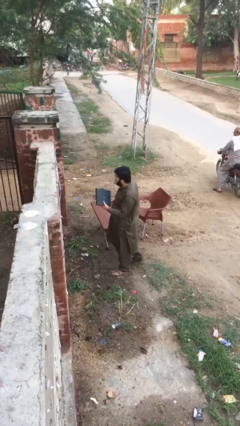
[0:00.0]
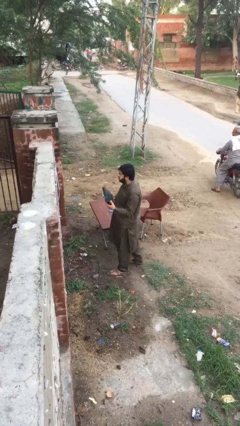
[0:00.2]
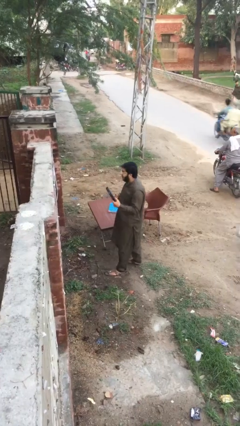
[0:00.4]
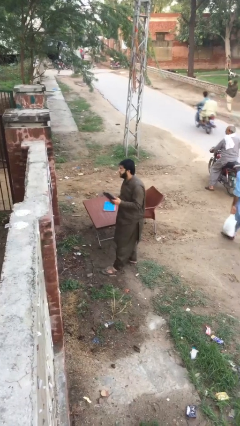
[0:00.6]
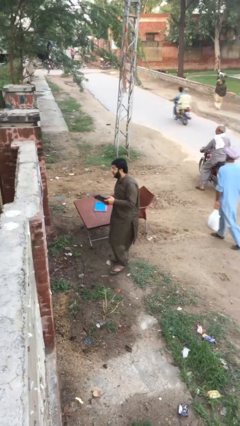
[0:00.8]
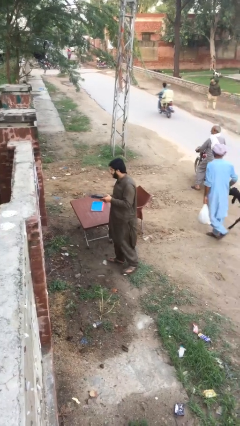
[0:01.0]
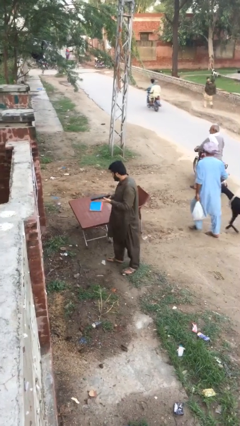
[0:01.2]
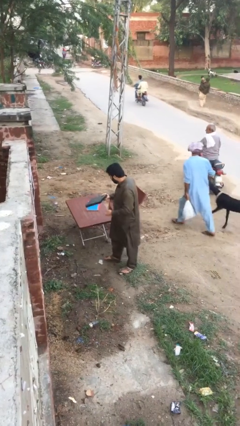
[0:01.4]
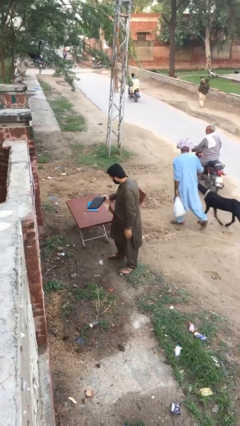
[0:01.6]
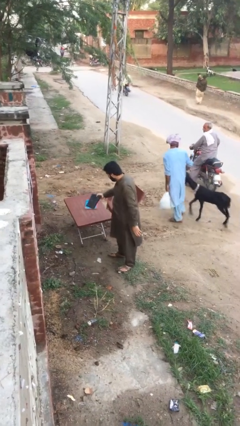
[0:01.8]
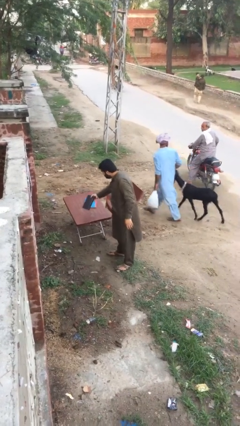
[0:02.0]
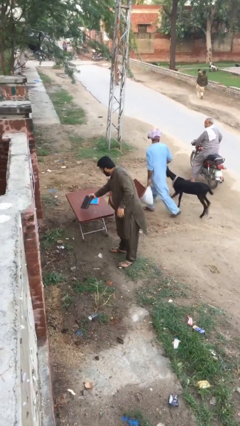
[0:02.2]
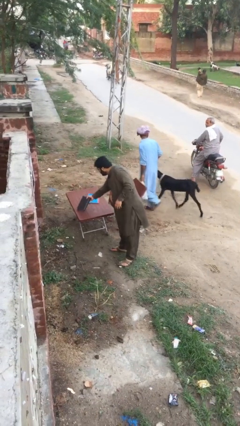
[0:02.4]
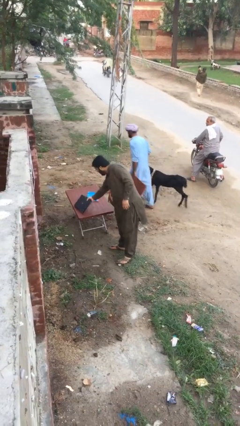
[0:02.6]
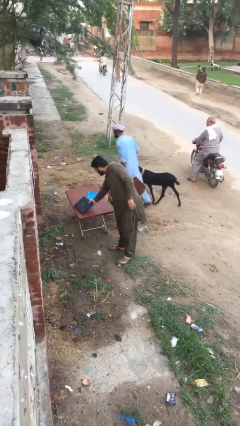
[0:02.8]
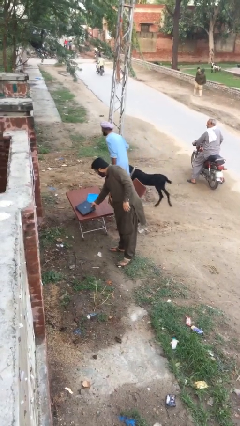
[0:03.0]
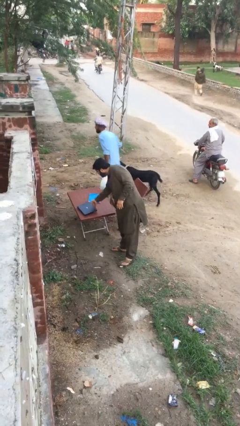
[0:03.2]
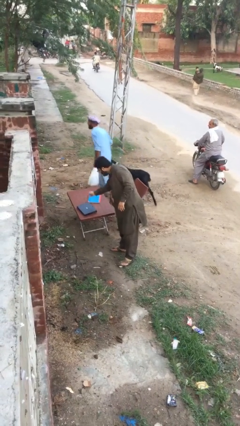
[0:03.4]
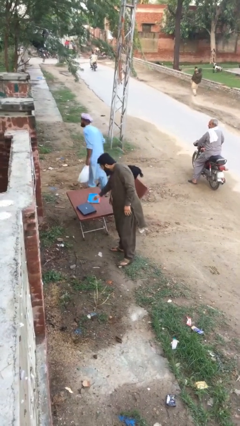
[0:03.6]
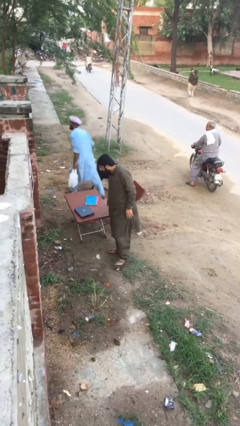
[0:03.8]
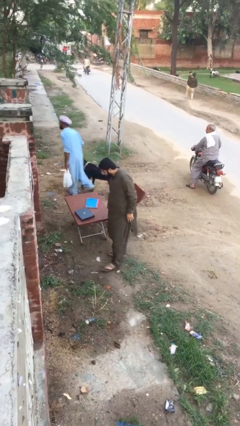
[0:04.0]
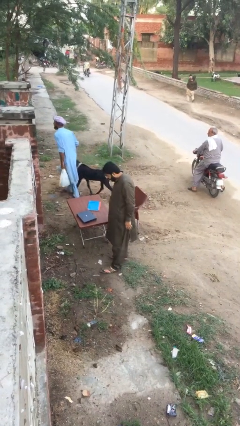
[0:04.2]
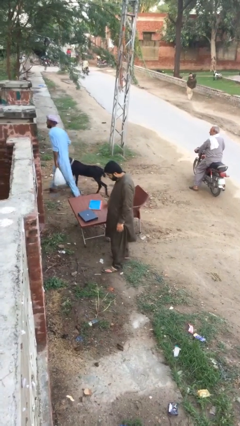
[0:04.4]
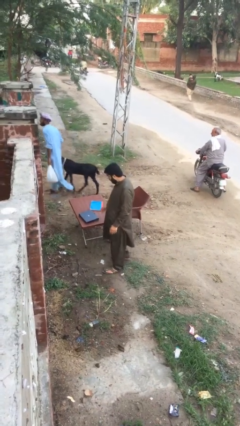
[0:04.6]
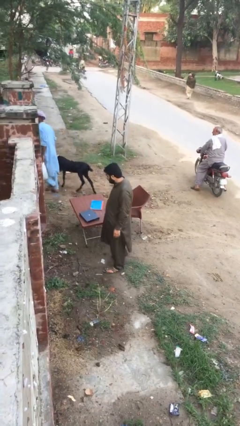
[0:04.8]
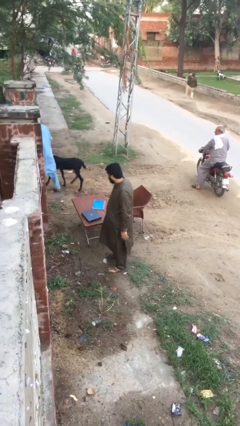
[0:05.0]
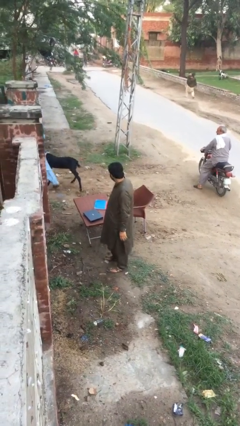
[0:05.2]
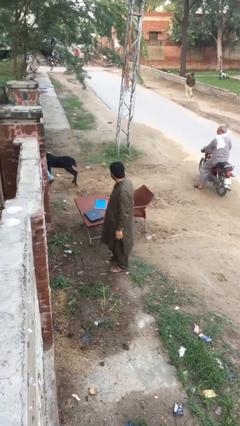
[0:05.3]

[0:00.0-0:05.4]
person puts down object on table

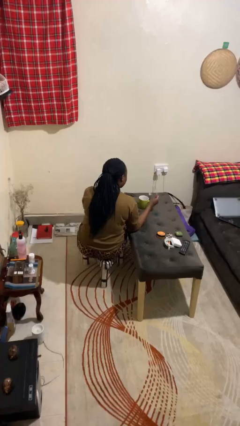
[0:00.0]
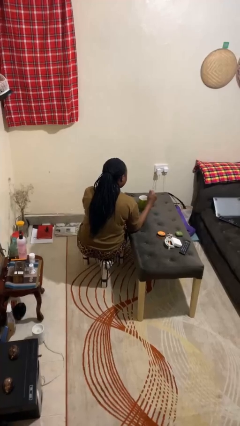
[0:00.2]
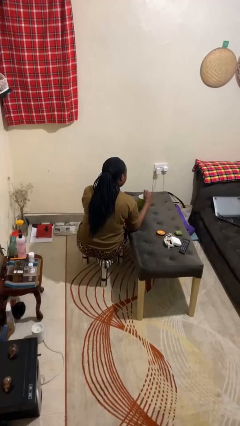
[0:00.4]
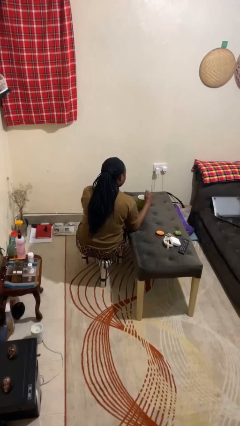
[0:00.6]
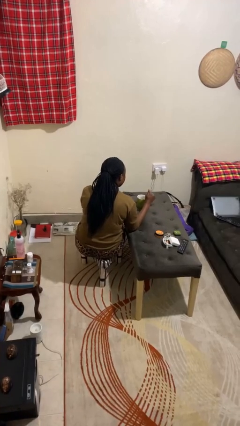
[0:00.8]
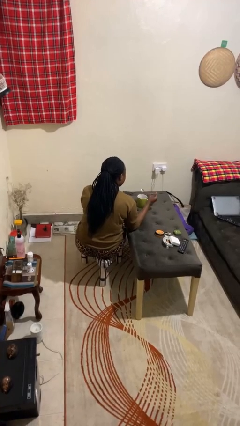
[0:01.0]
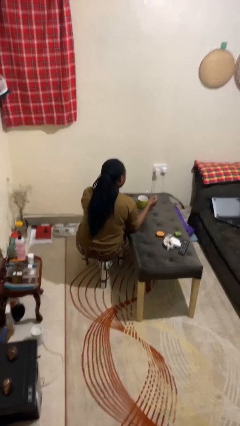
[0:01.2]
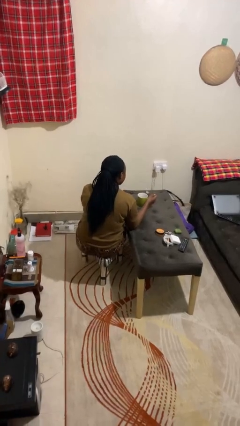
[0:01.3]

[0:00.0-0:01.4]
person stirs mug

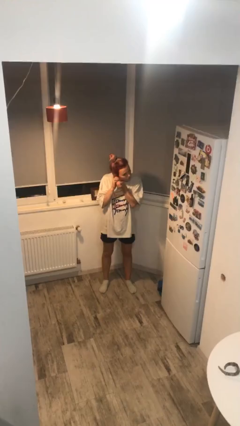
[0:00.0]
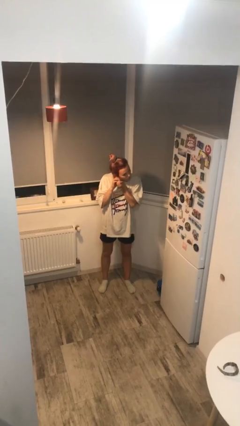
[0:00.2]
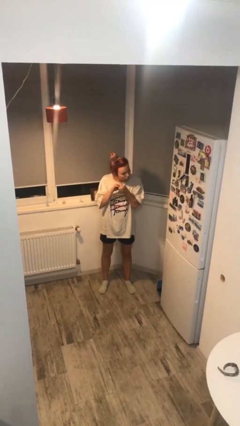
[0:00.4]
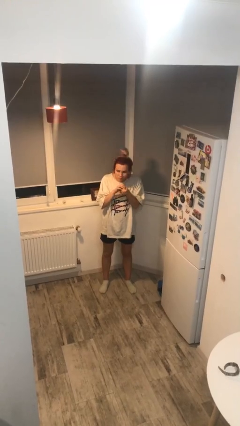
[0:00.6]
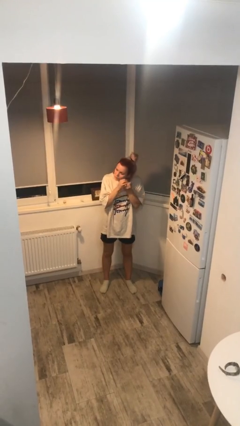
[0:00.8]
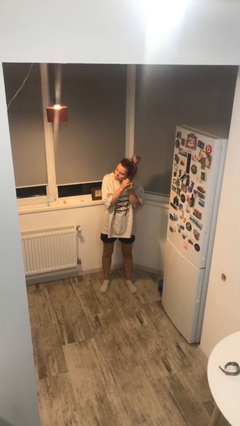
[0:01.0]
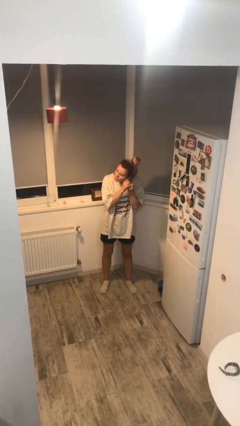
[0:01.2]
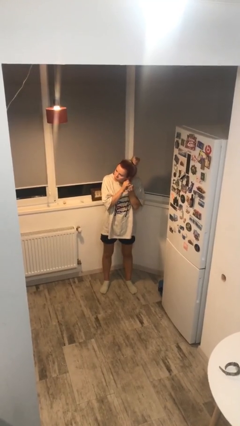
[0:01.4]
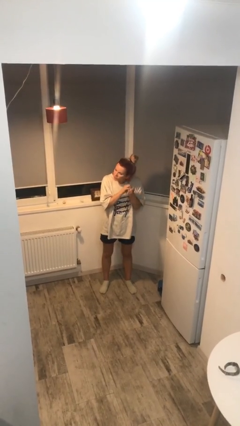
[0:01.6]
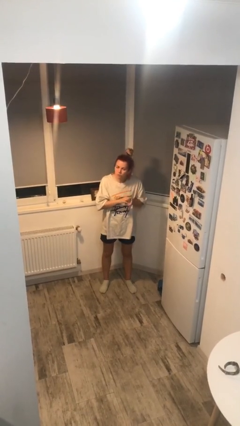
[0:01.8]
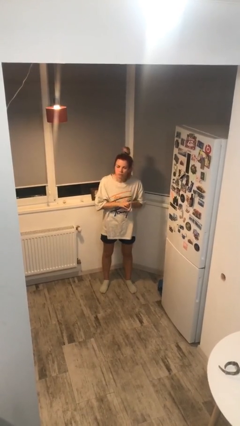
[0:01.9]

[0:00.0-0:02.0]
person takes off earrings

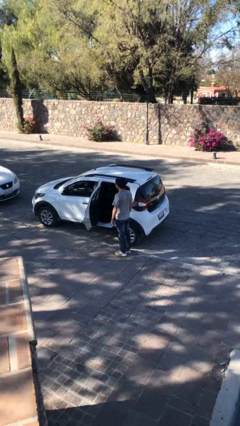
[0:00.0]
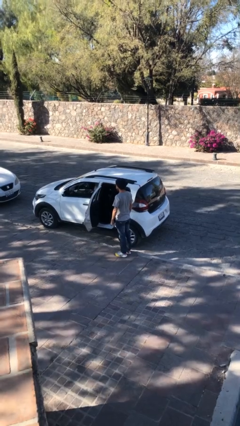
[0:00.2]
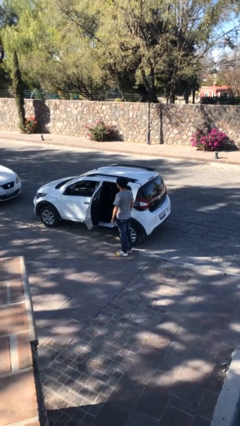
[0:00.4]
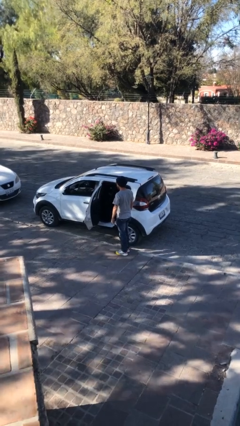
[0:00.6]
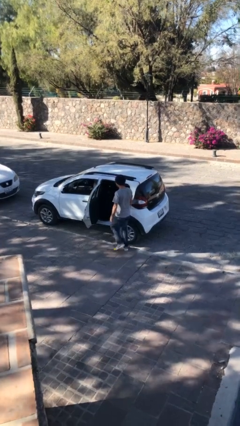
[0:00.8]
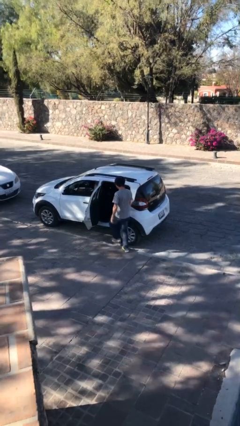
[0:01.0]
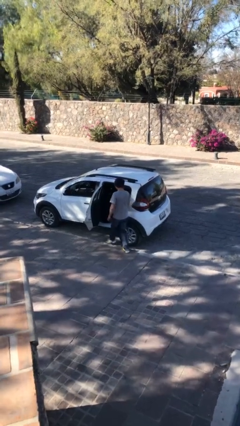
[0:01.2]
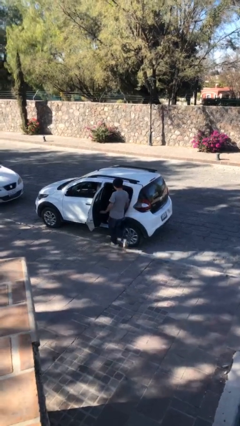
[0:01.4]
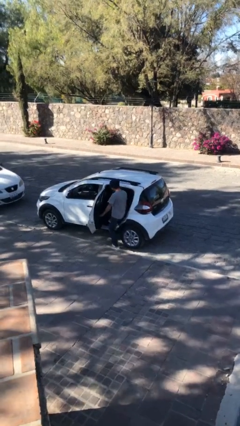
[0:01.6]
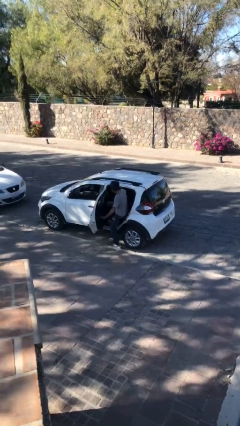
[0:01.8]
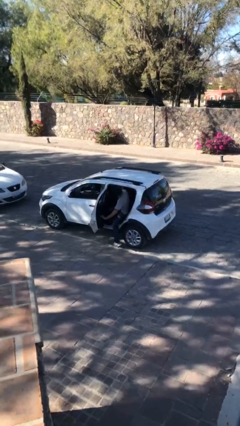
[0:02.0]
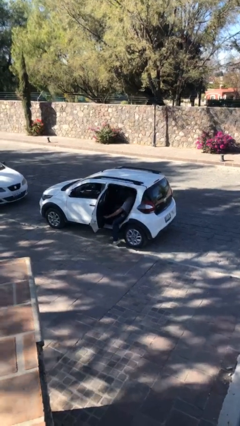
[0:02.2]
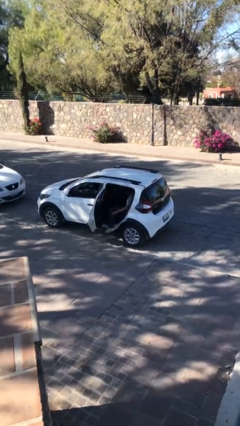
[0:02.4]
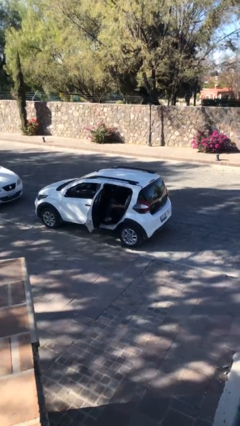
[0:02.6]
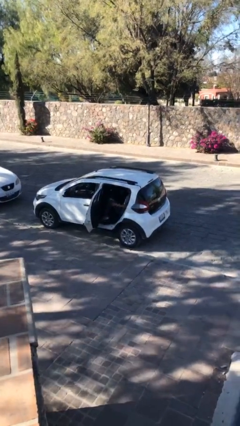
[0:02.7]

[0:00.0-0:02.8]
person enters car

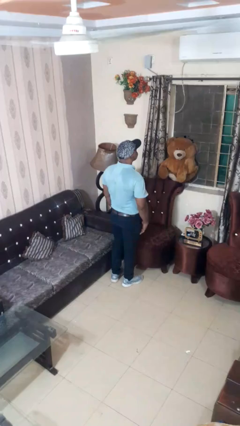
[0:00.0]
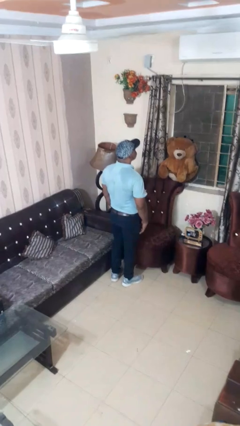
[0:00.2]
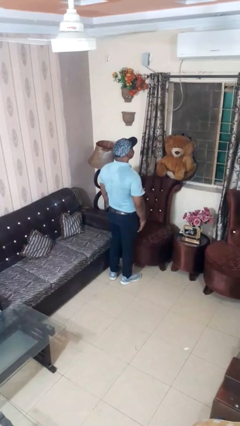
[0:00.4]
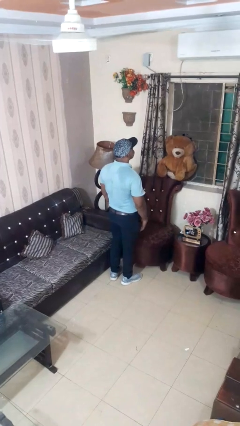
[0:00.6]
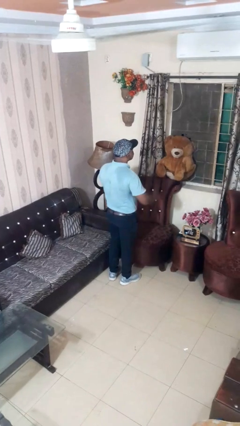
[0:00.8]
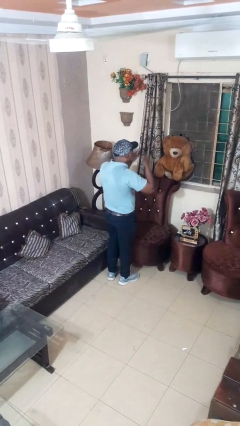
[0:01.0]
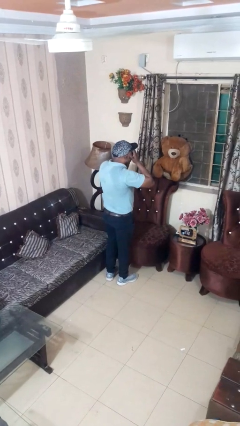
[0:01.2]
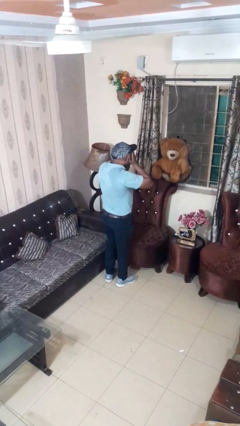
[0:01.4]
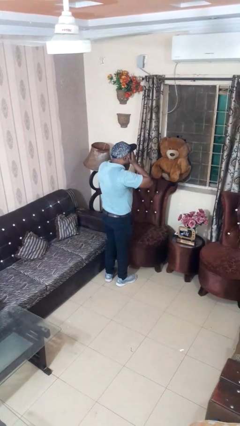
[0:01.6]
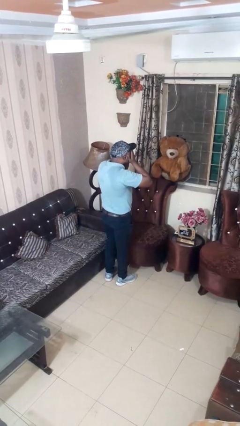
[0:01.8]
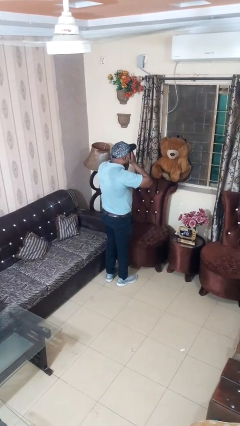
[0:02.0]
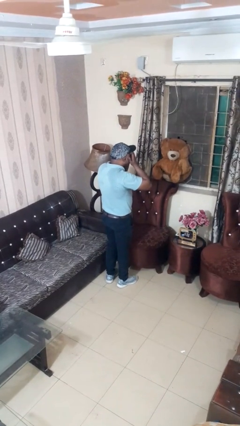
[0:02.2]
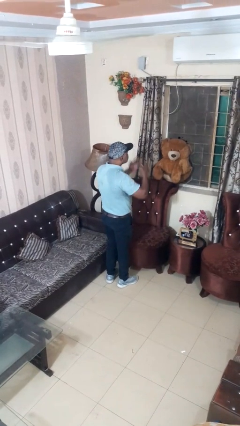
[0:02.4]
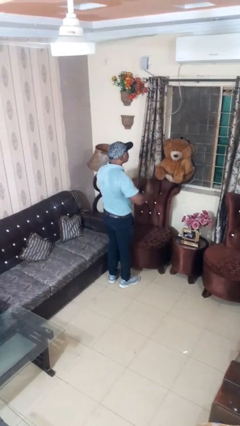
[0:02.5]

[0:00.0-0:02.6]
person covers face with hands

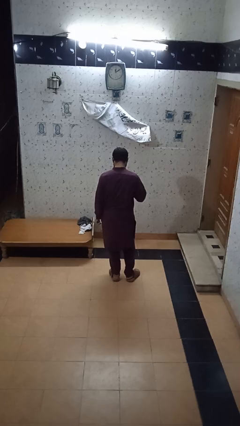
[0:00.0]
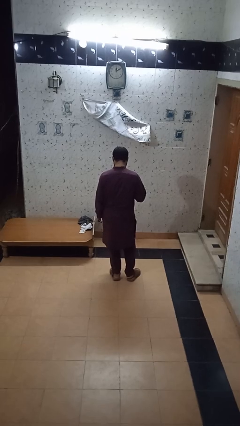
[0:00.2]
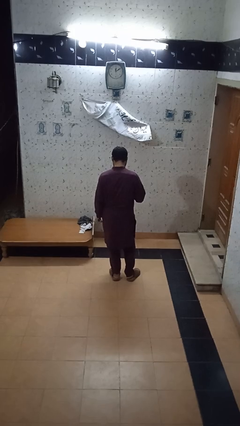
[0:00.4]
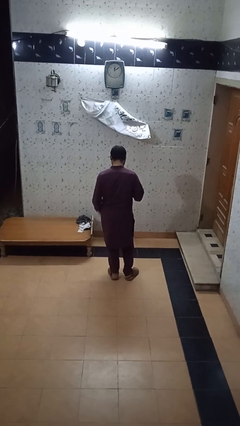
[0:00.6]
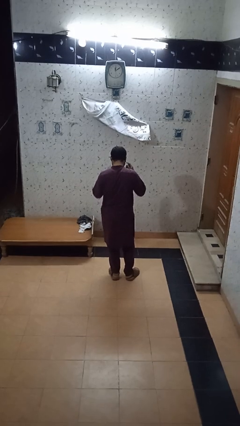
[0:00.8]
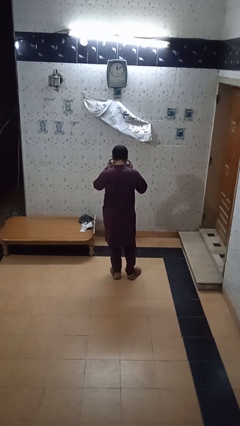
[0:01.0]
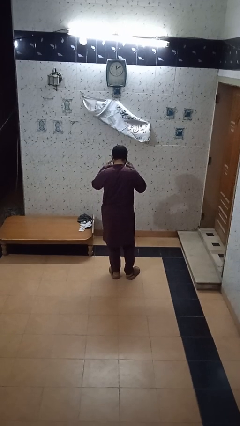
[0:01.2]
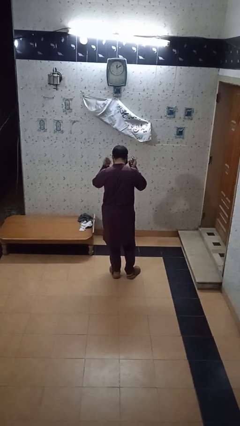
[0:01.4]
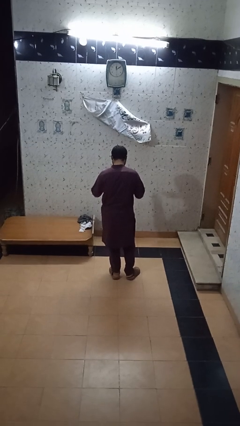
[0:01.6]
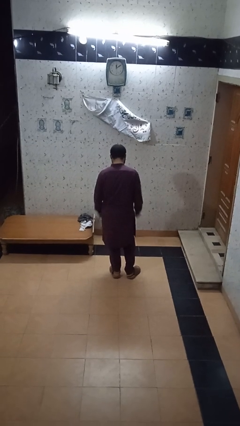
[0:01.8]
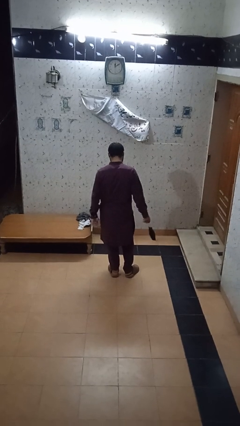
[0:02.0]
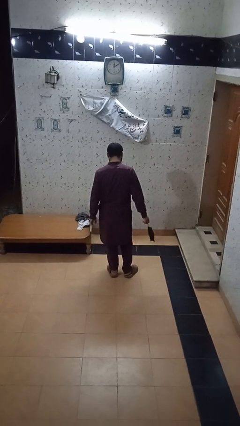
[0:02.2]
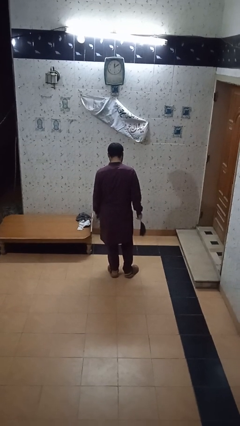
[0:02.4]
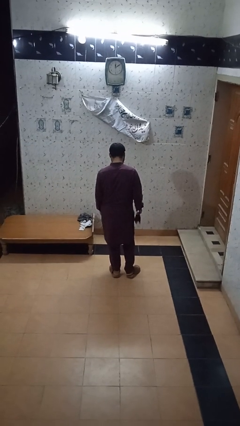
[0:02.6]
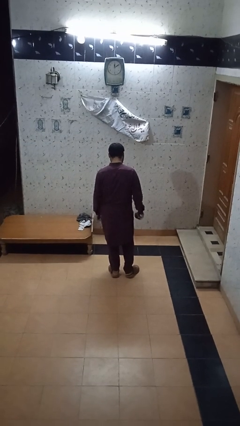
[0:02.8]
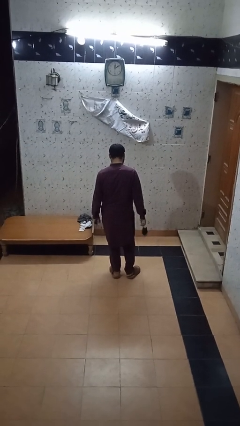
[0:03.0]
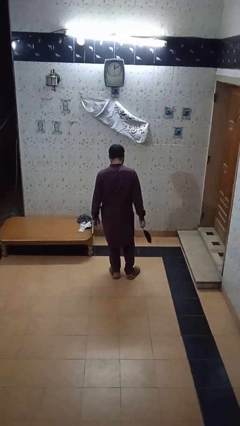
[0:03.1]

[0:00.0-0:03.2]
person takes off facemask
